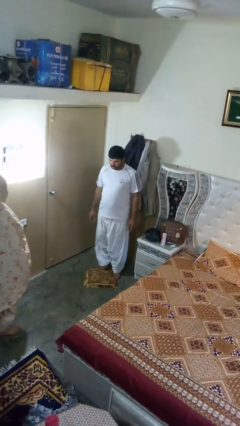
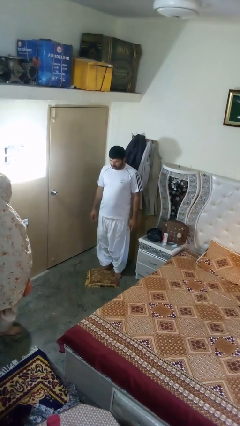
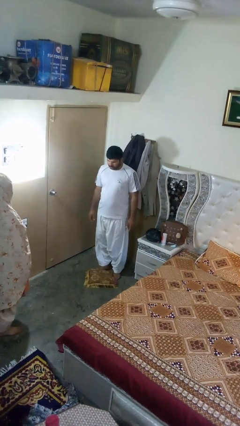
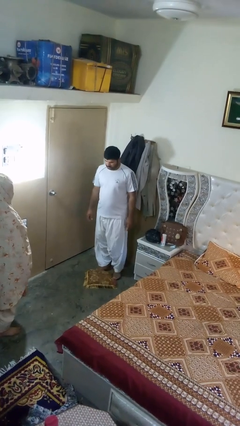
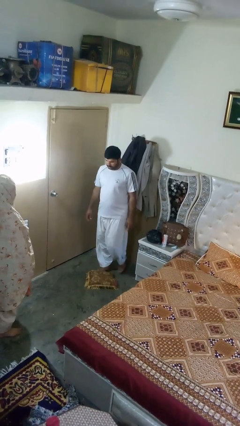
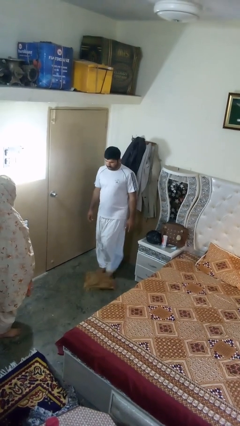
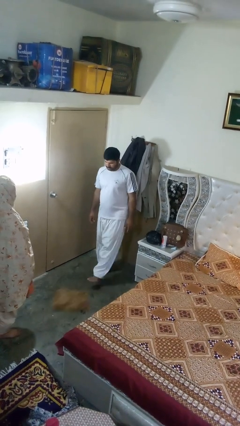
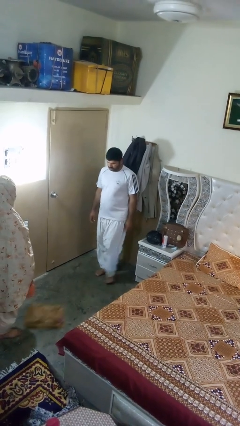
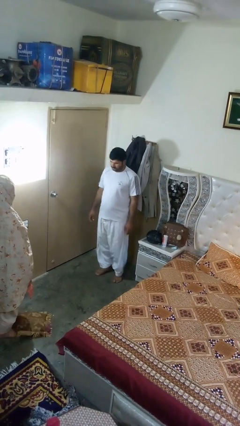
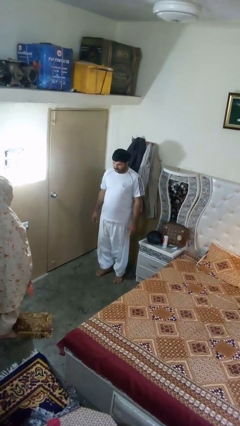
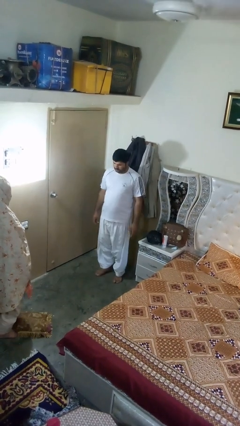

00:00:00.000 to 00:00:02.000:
person kicks object to person

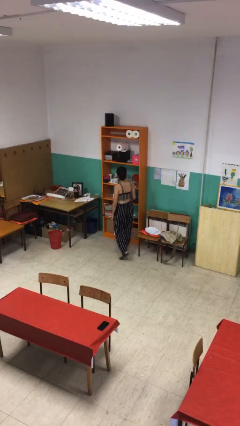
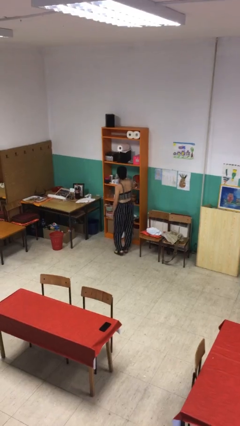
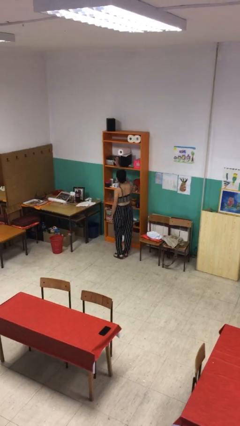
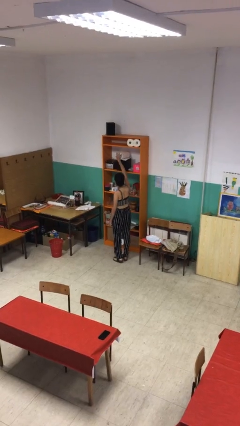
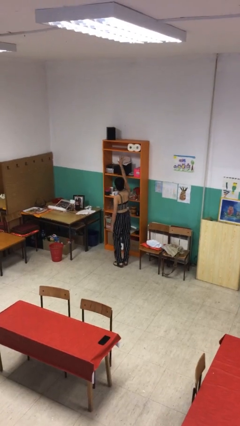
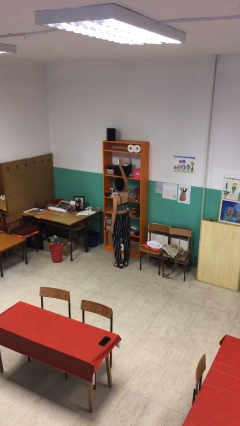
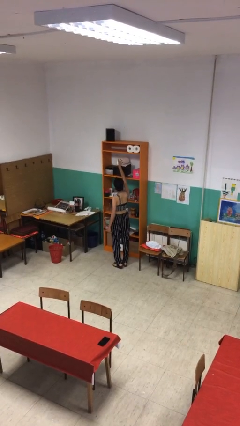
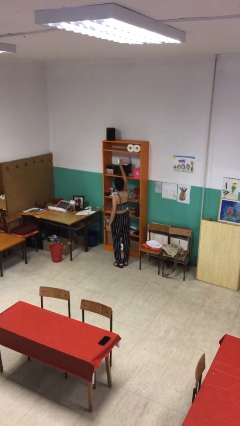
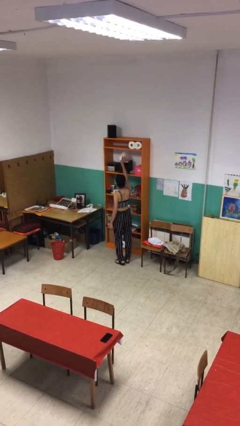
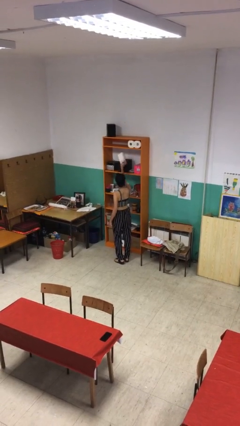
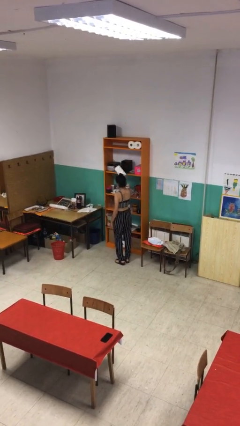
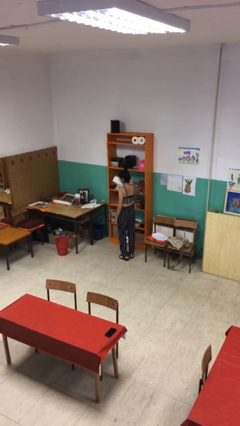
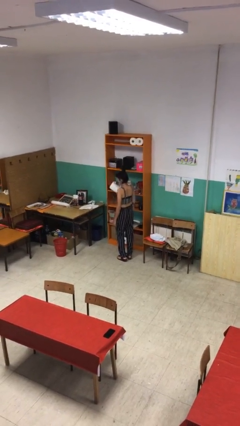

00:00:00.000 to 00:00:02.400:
person picks up object from shelf

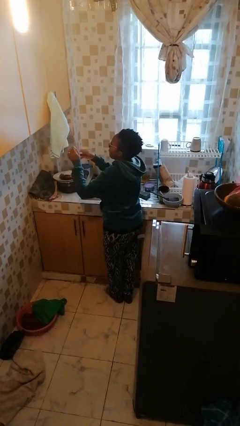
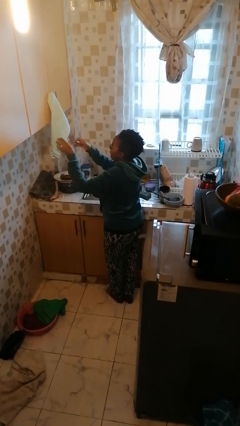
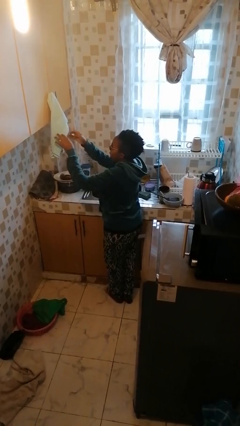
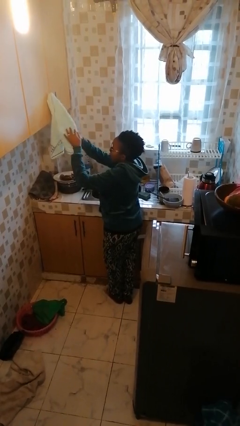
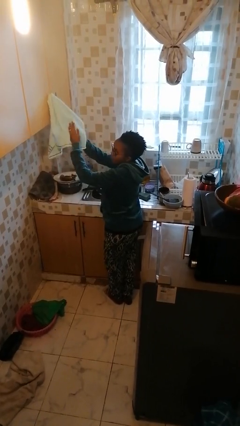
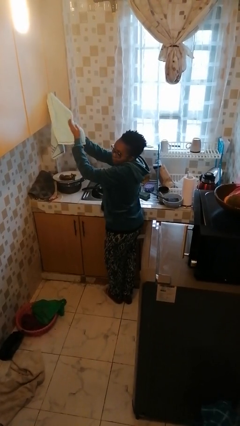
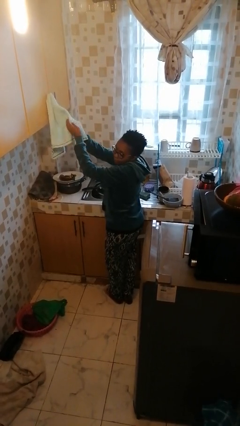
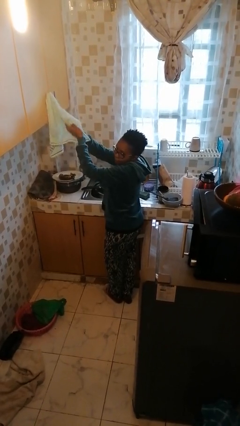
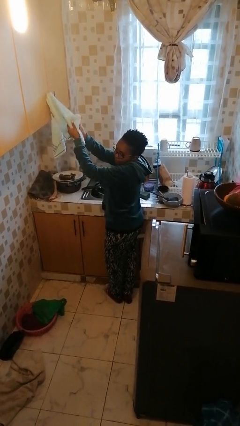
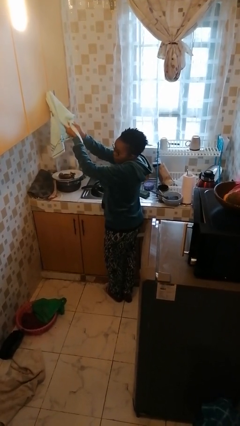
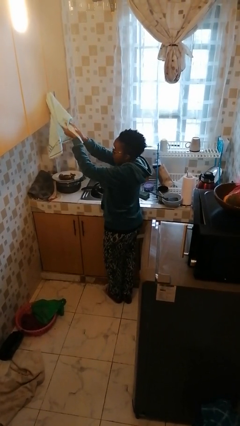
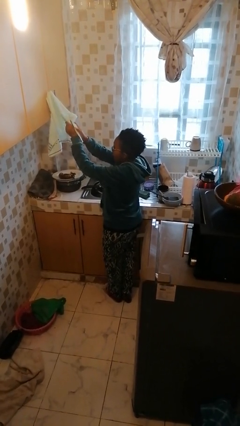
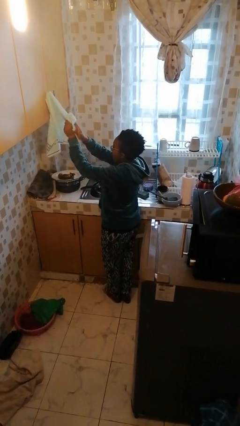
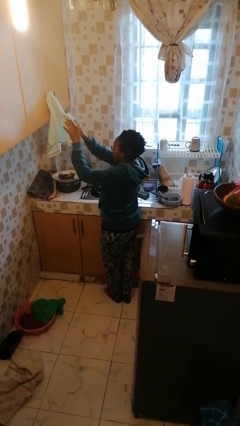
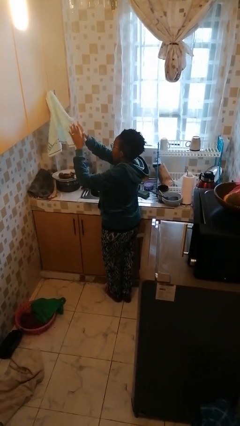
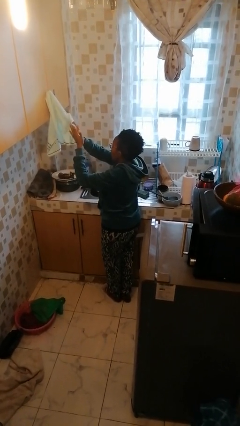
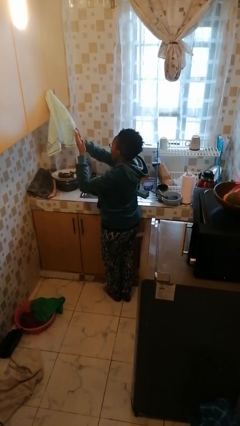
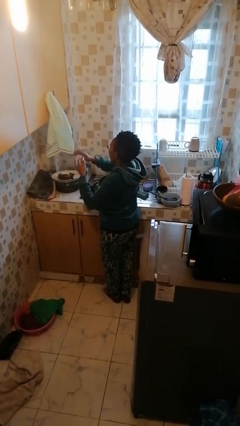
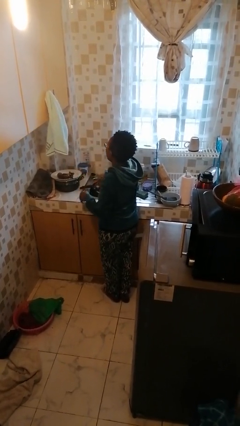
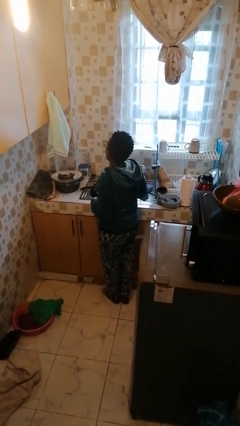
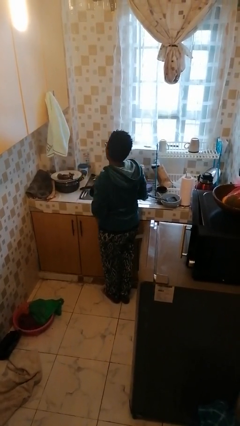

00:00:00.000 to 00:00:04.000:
person dries hands with towel

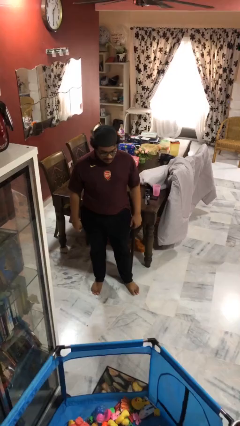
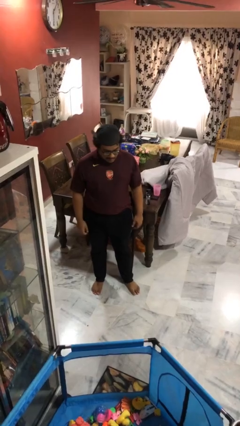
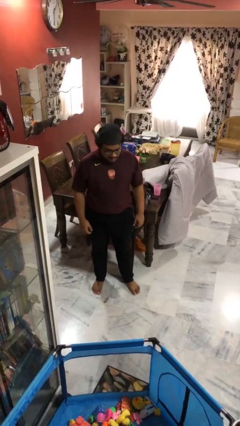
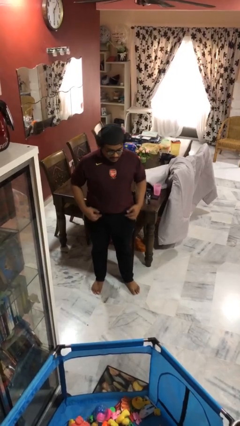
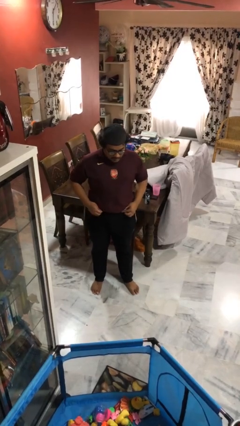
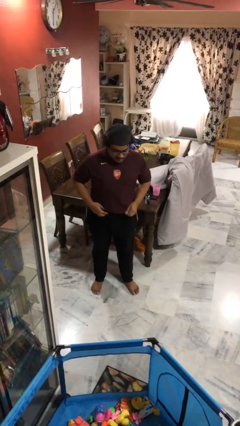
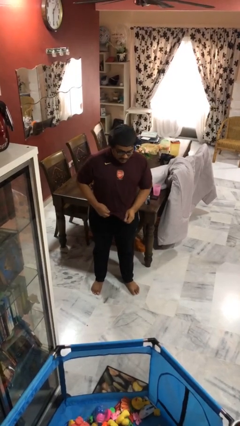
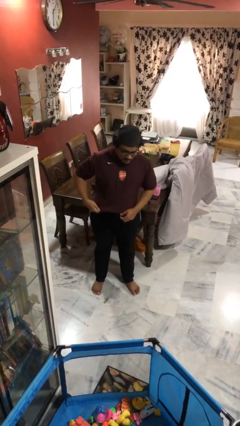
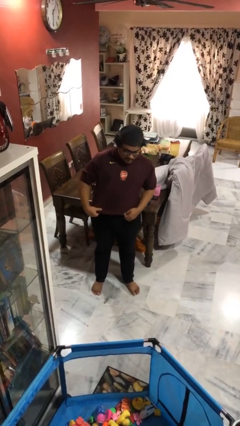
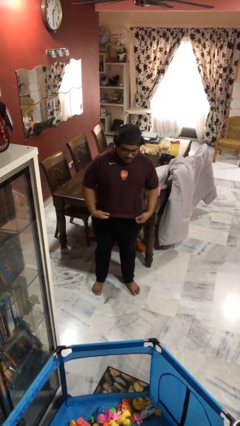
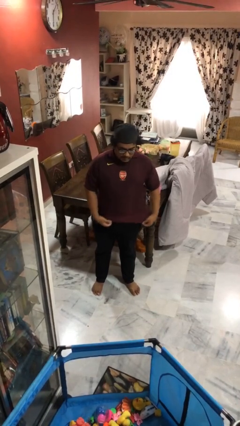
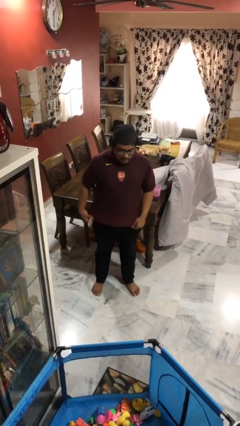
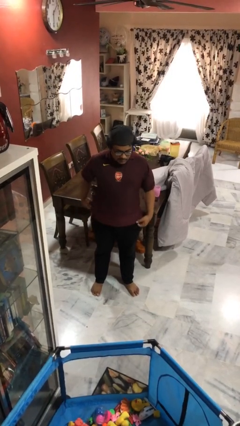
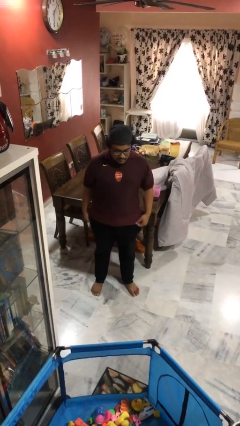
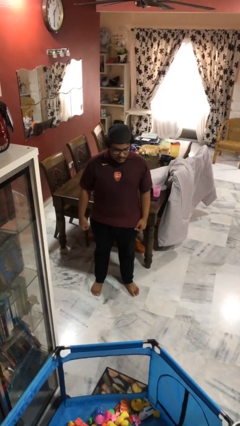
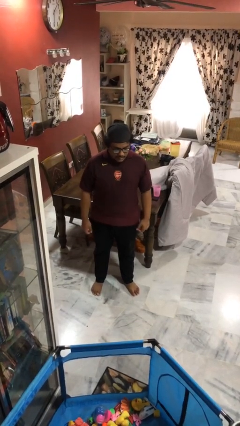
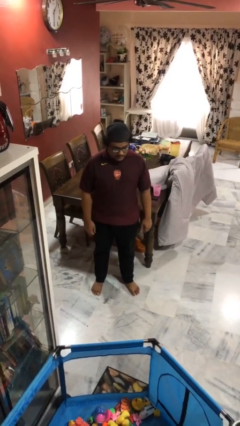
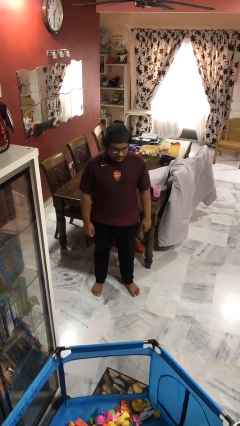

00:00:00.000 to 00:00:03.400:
person untucks shirt

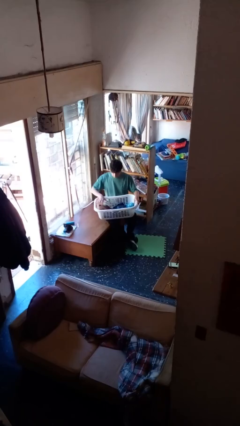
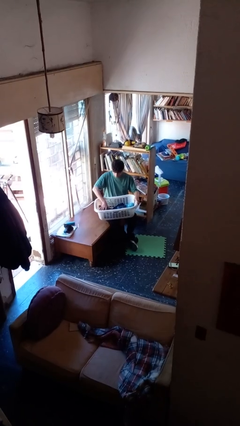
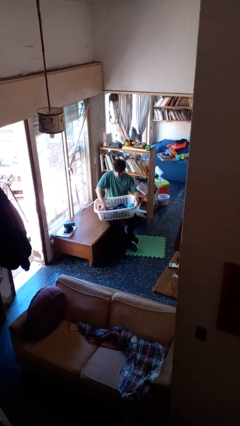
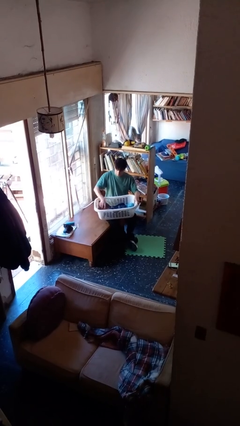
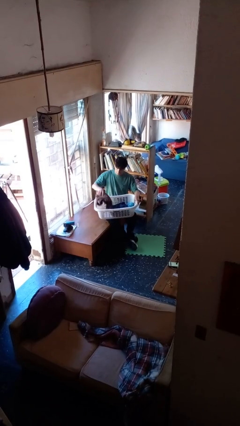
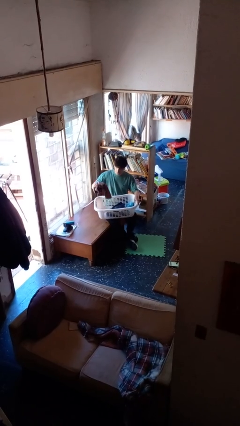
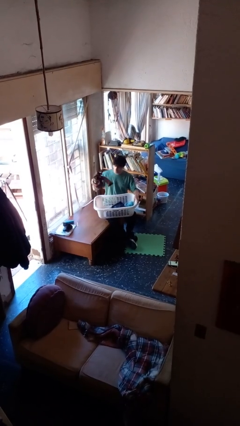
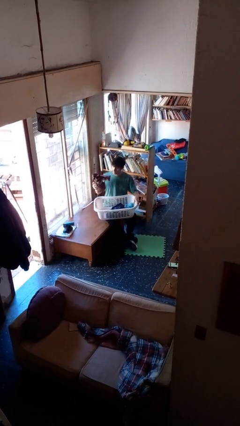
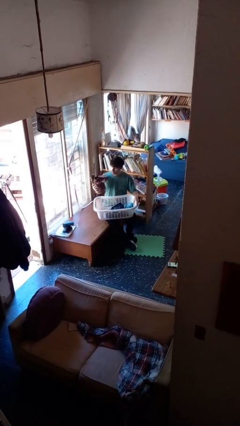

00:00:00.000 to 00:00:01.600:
person takes object from basket

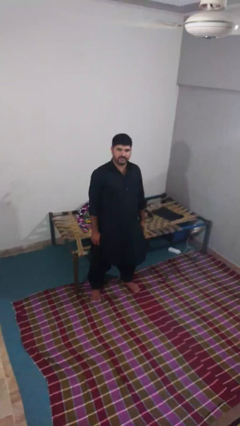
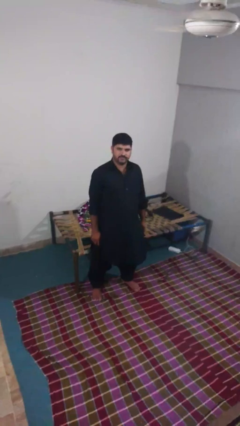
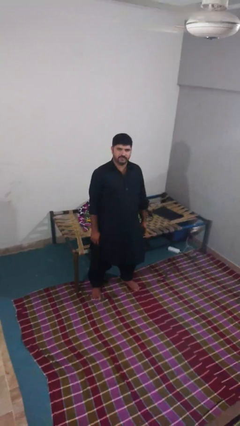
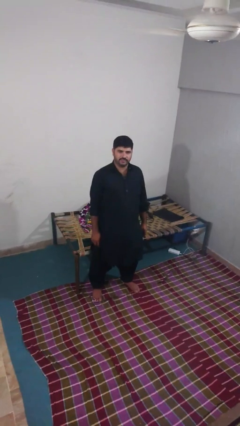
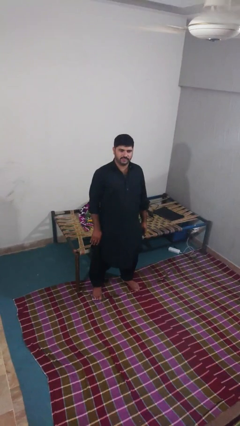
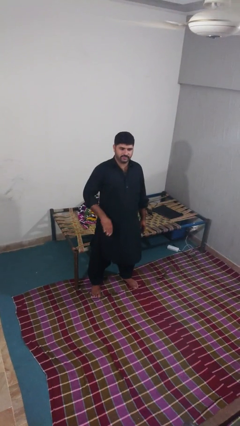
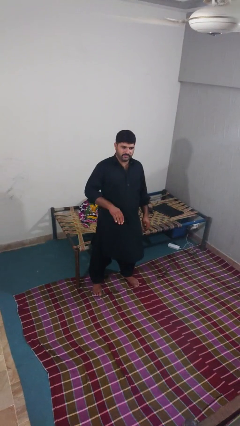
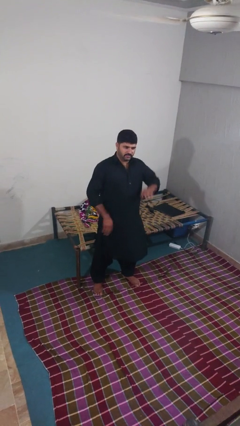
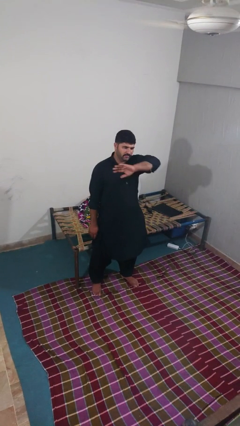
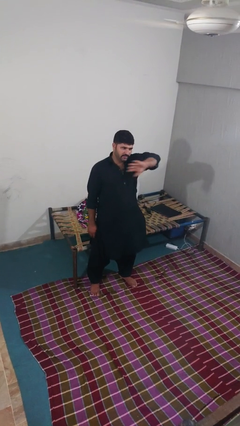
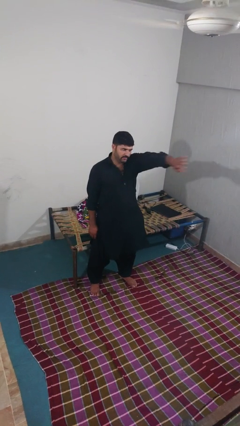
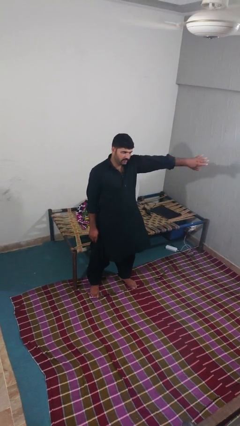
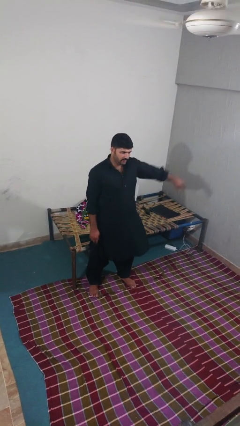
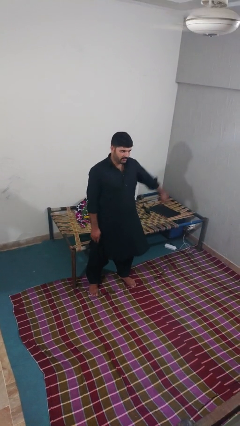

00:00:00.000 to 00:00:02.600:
person gestures swipe left

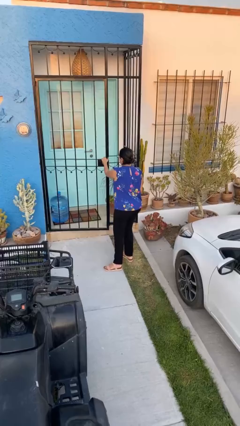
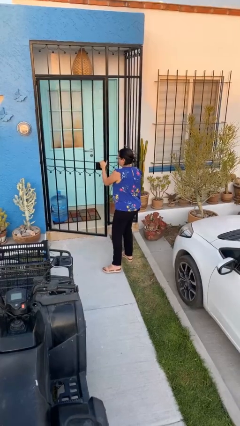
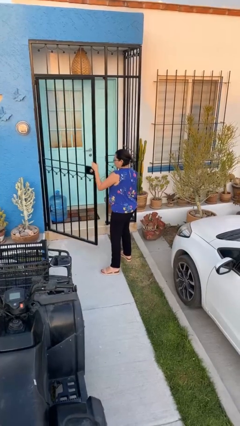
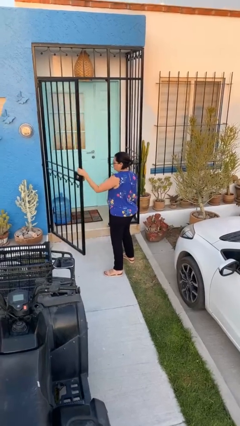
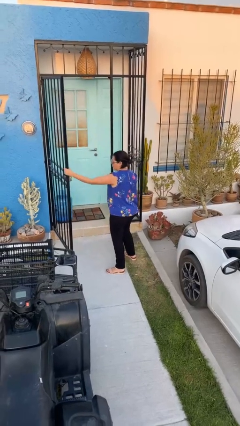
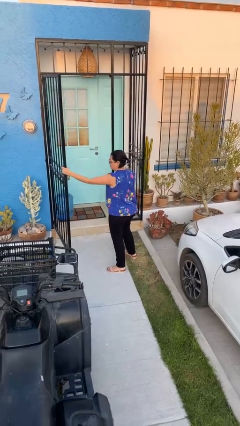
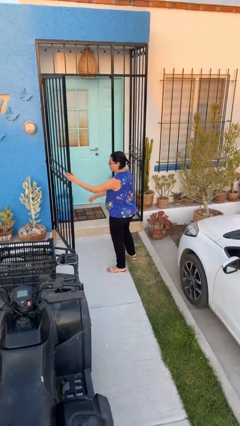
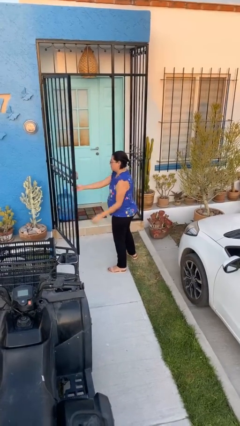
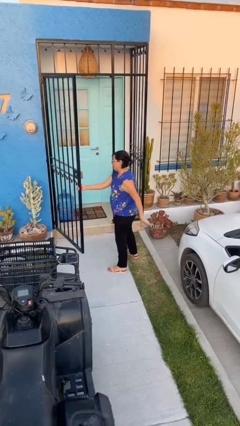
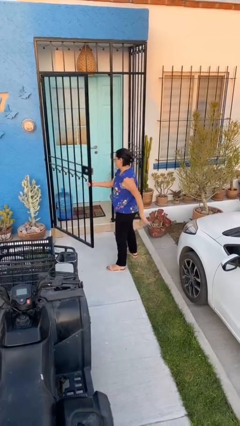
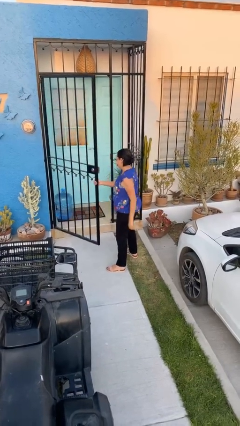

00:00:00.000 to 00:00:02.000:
person opens facility door
